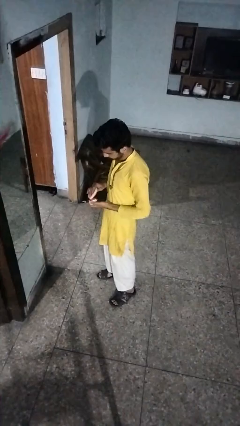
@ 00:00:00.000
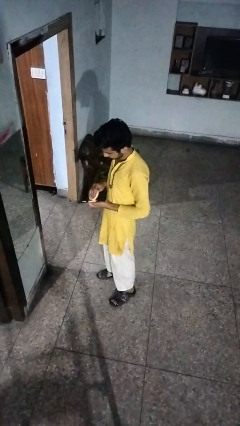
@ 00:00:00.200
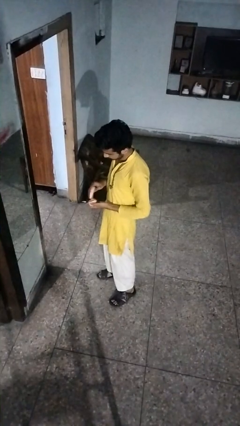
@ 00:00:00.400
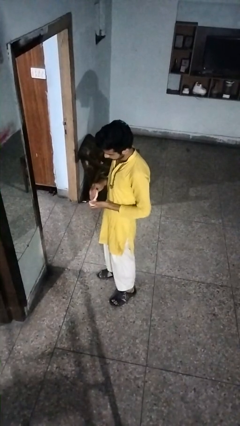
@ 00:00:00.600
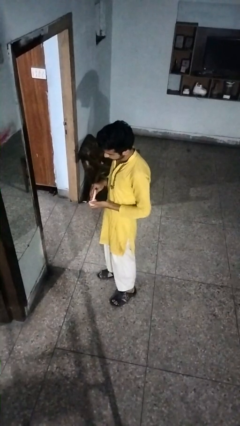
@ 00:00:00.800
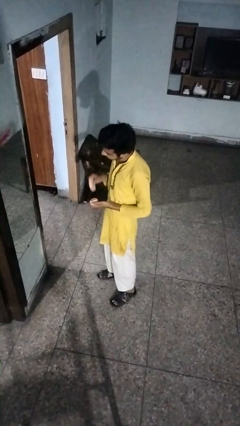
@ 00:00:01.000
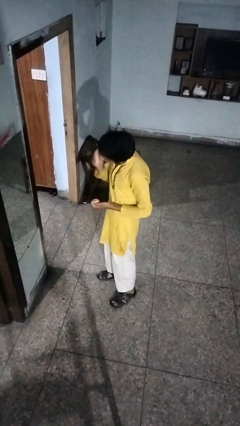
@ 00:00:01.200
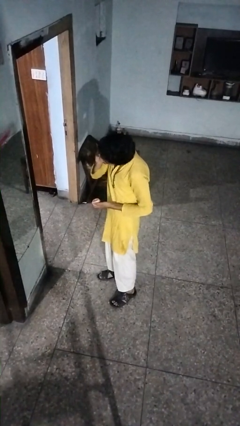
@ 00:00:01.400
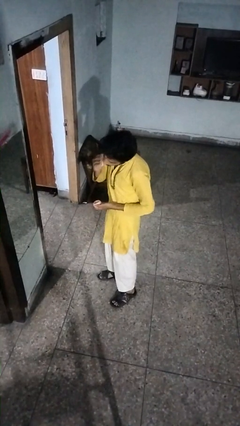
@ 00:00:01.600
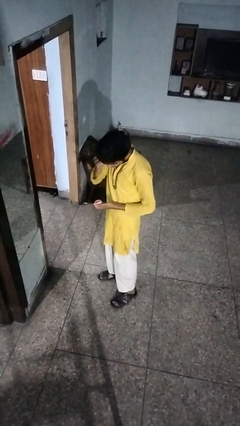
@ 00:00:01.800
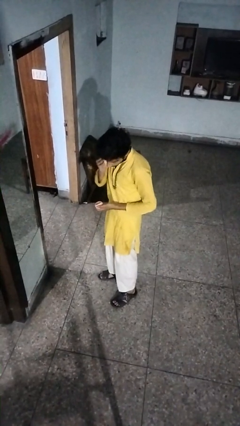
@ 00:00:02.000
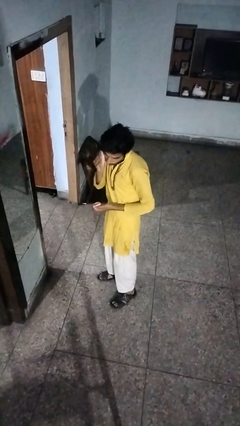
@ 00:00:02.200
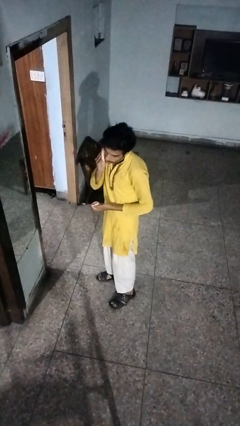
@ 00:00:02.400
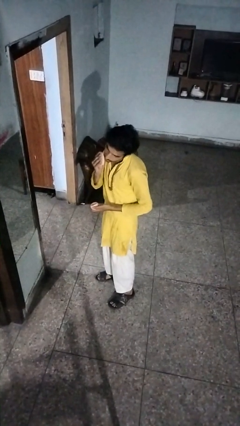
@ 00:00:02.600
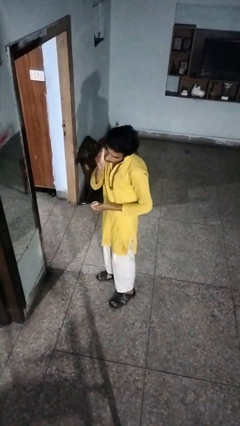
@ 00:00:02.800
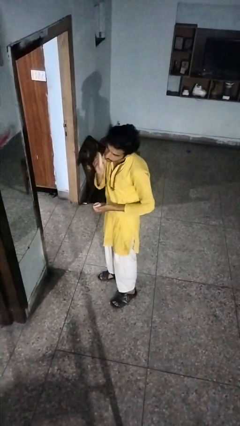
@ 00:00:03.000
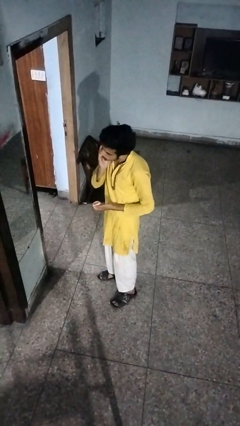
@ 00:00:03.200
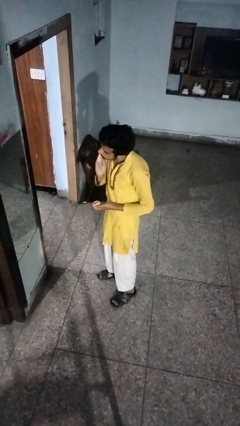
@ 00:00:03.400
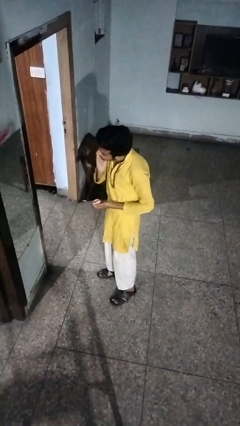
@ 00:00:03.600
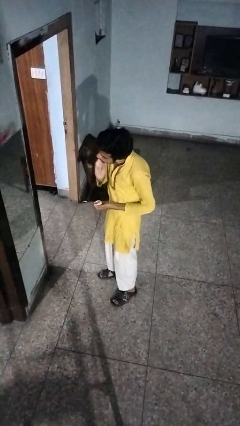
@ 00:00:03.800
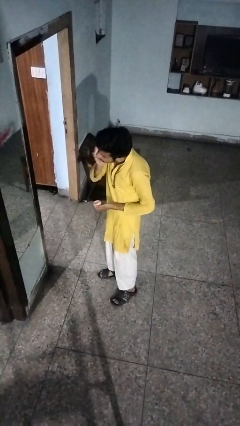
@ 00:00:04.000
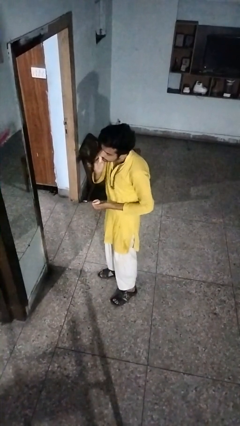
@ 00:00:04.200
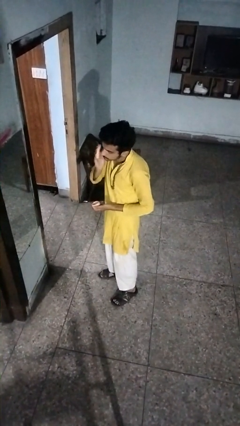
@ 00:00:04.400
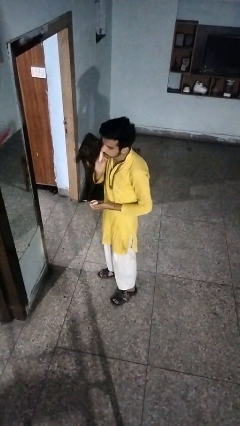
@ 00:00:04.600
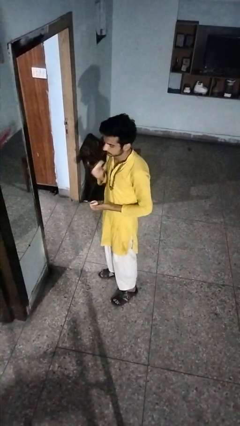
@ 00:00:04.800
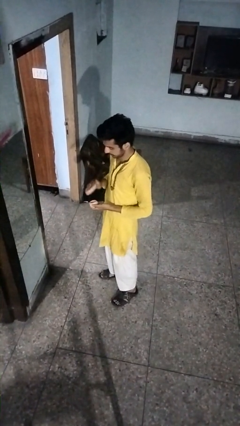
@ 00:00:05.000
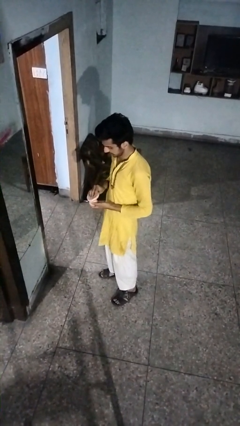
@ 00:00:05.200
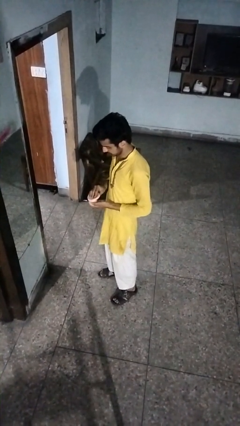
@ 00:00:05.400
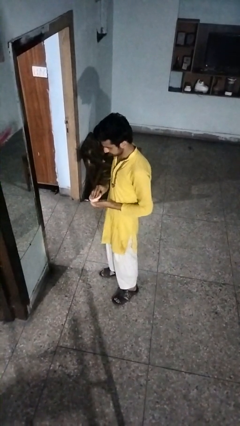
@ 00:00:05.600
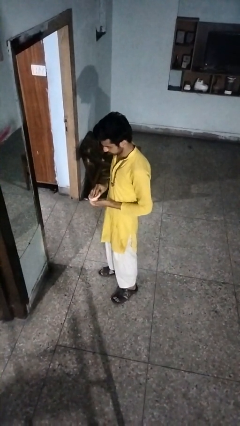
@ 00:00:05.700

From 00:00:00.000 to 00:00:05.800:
person applies foundation makeup

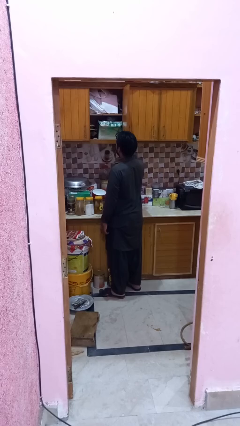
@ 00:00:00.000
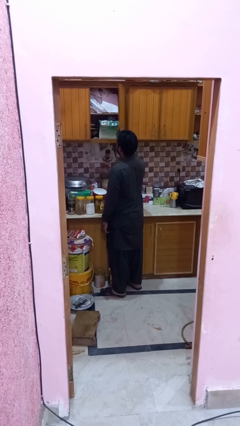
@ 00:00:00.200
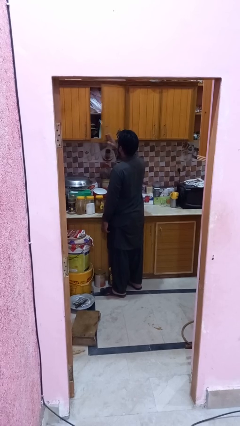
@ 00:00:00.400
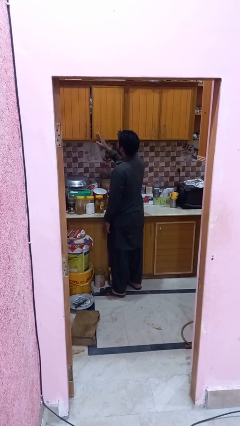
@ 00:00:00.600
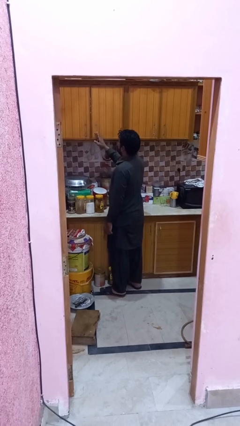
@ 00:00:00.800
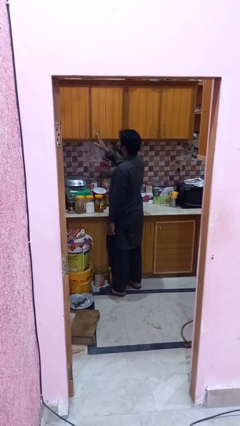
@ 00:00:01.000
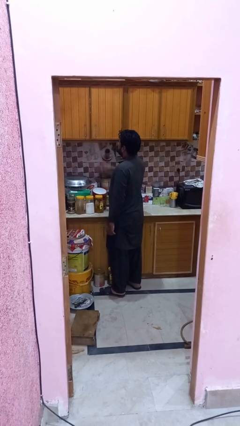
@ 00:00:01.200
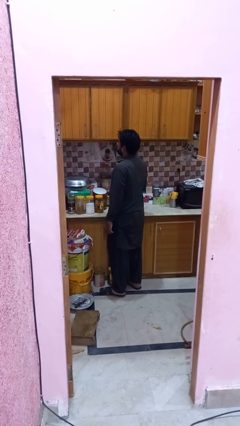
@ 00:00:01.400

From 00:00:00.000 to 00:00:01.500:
person closes cabinet

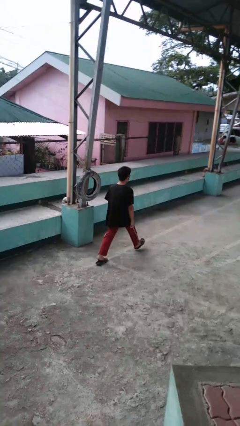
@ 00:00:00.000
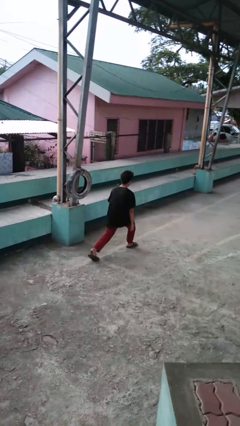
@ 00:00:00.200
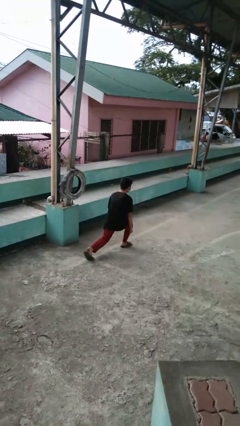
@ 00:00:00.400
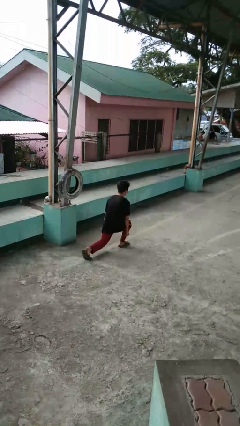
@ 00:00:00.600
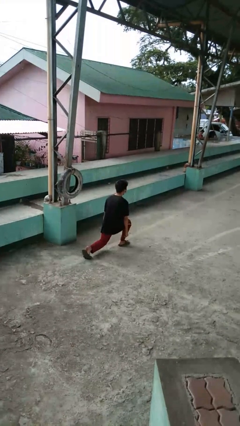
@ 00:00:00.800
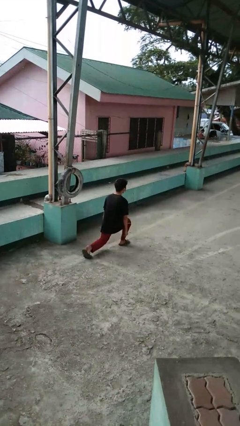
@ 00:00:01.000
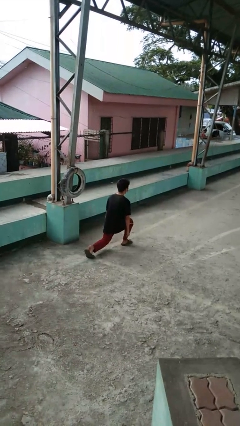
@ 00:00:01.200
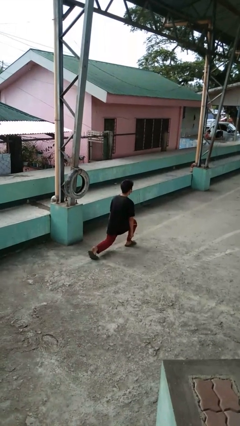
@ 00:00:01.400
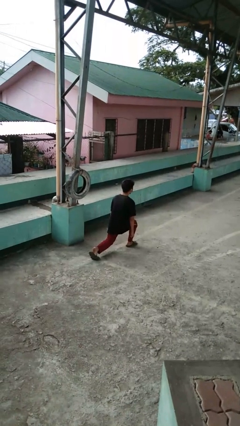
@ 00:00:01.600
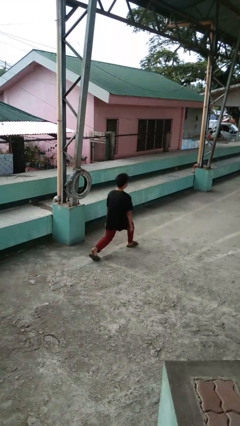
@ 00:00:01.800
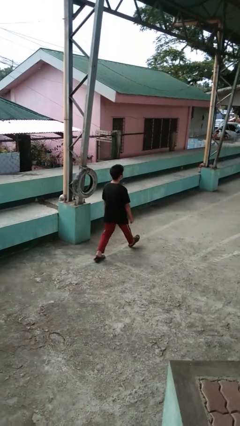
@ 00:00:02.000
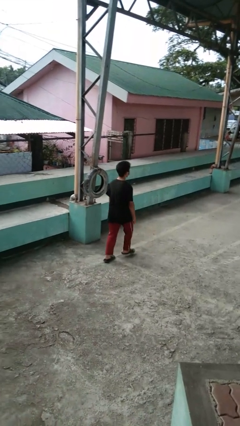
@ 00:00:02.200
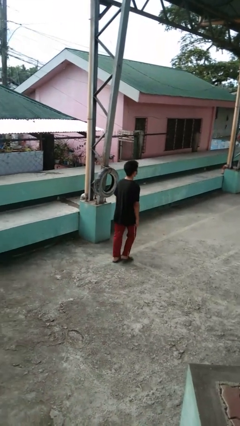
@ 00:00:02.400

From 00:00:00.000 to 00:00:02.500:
person exercises with lunges

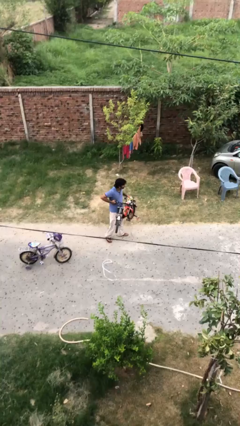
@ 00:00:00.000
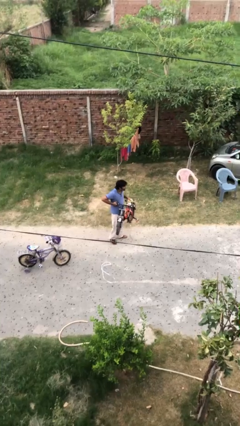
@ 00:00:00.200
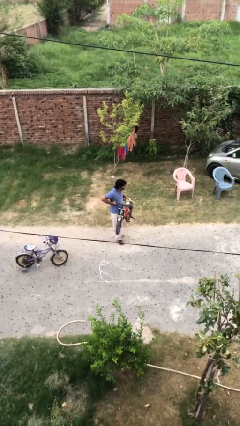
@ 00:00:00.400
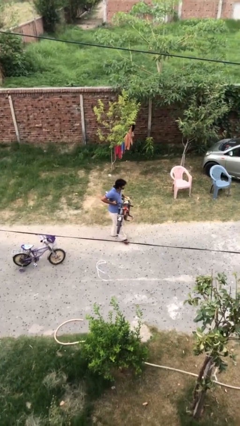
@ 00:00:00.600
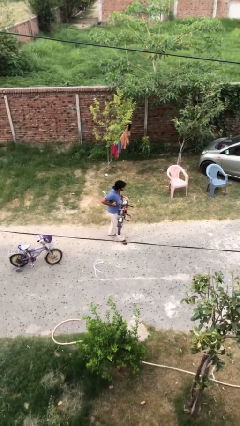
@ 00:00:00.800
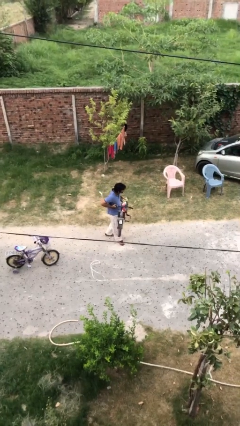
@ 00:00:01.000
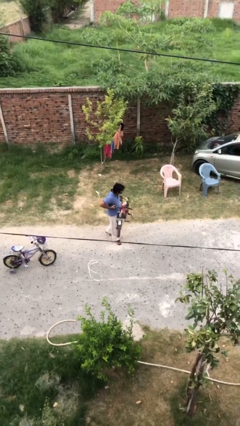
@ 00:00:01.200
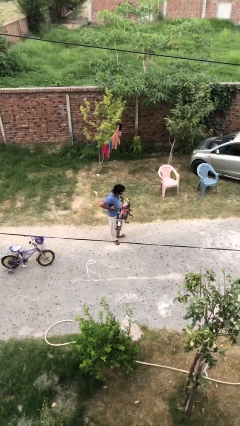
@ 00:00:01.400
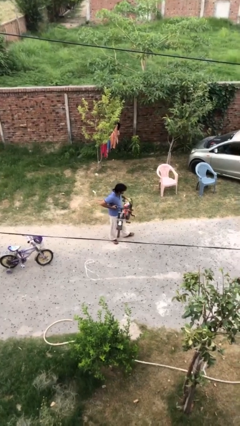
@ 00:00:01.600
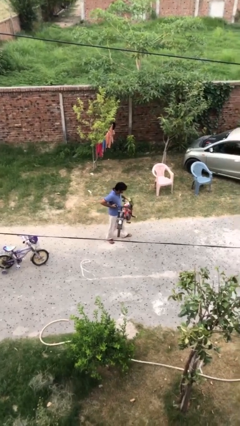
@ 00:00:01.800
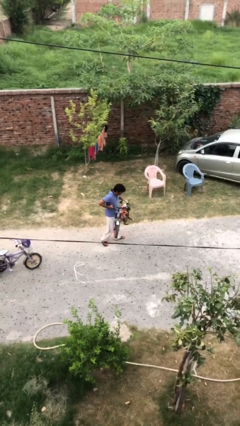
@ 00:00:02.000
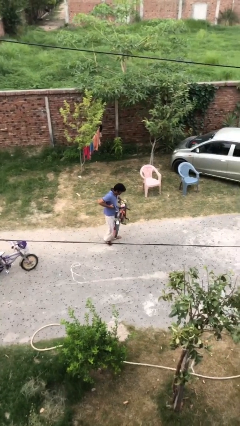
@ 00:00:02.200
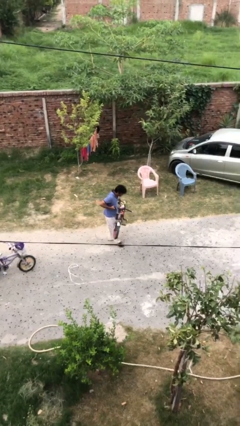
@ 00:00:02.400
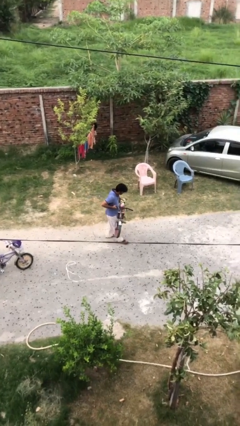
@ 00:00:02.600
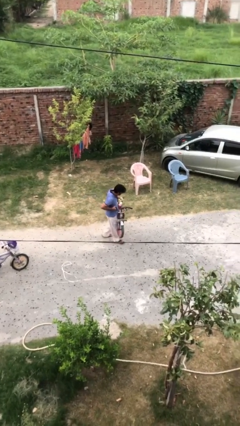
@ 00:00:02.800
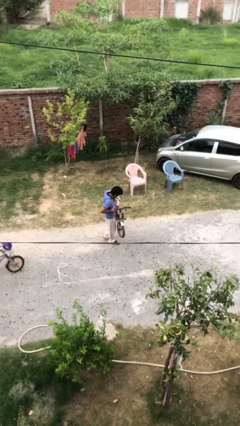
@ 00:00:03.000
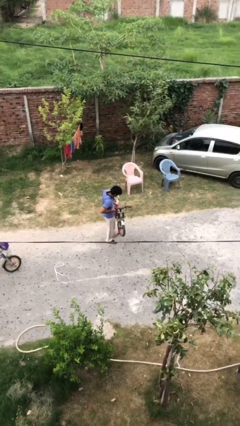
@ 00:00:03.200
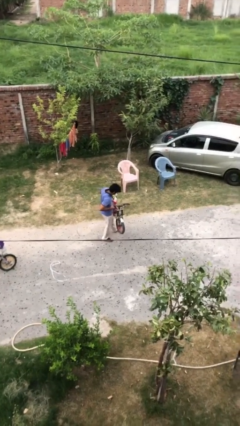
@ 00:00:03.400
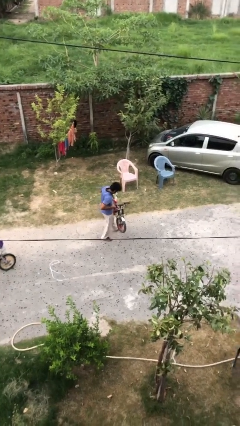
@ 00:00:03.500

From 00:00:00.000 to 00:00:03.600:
person carries heavy object

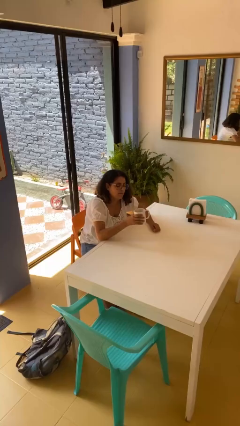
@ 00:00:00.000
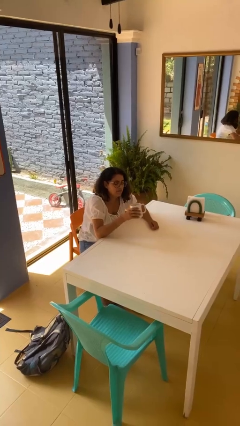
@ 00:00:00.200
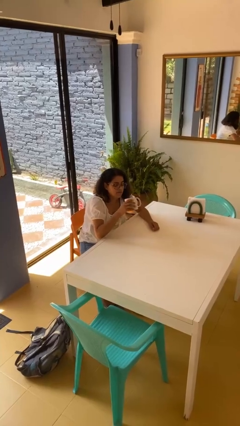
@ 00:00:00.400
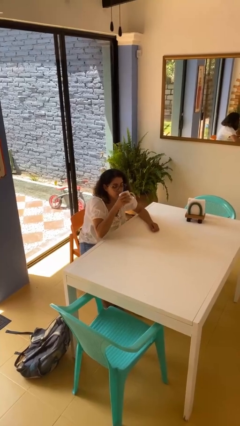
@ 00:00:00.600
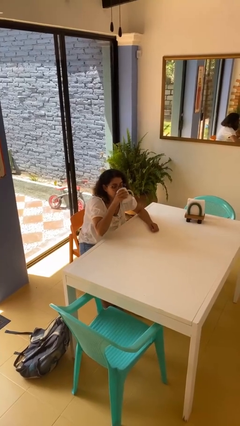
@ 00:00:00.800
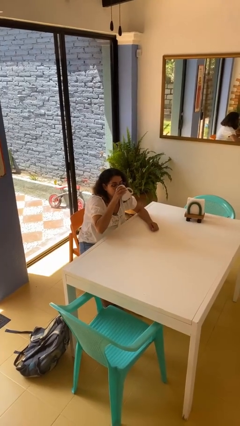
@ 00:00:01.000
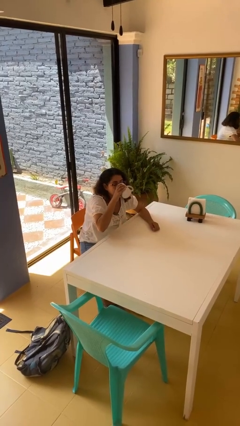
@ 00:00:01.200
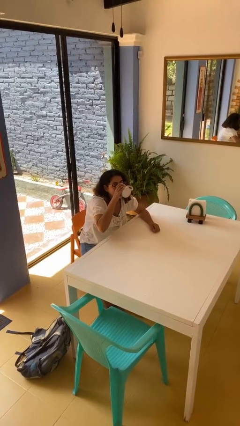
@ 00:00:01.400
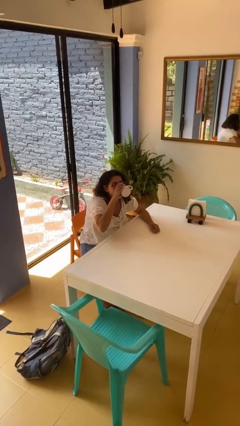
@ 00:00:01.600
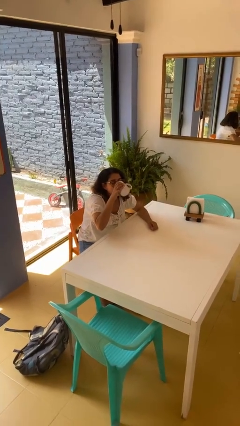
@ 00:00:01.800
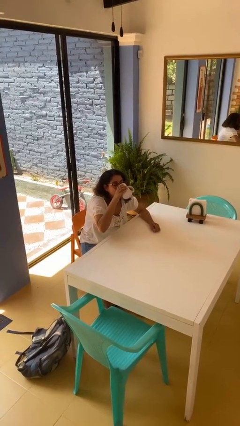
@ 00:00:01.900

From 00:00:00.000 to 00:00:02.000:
person drinks from mug

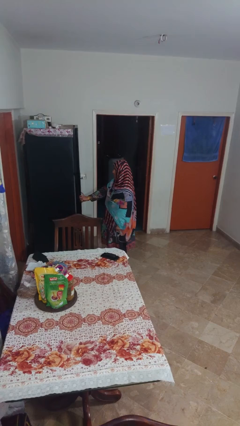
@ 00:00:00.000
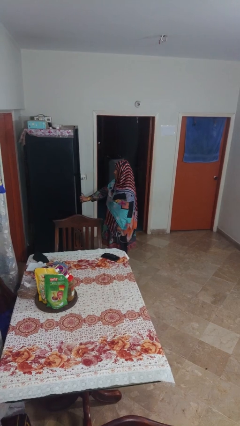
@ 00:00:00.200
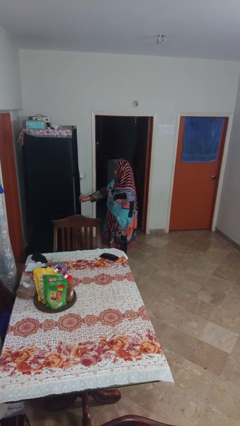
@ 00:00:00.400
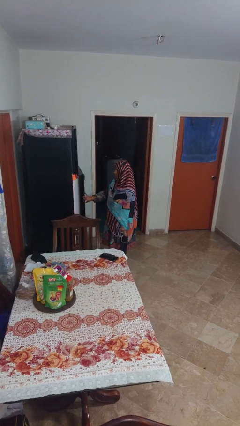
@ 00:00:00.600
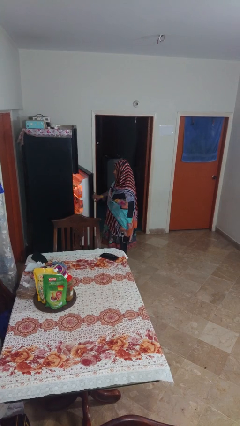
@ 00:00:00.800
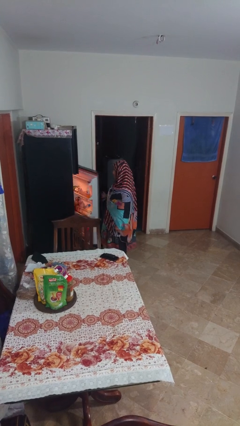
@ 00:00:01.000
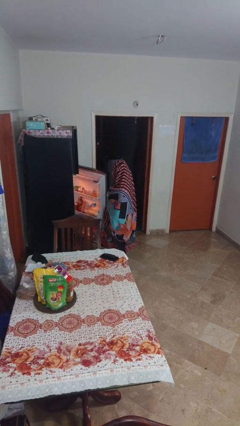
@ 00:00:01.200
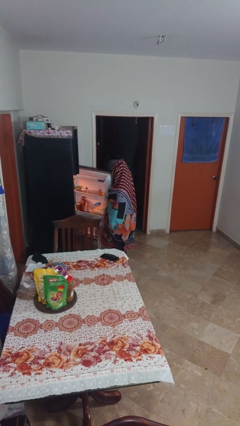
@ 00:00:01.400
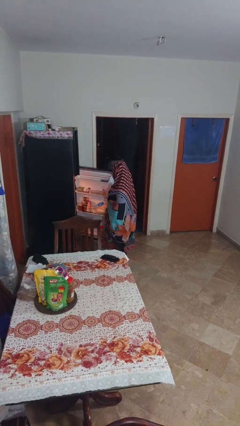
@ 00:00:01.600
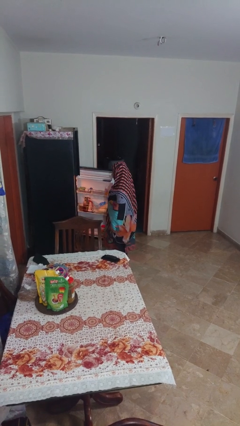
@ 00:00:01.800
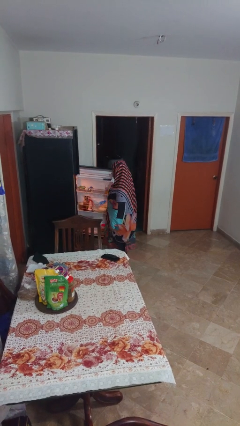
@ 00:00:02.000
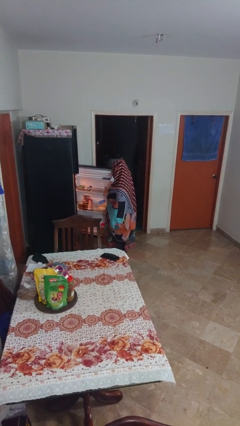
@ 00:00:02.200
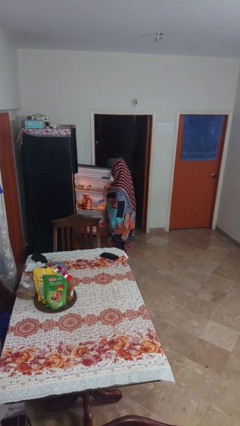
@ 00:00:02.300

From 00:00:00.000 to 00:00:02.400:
person opens refrigerator
